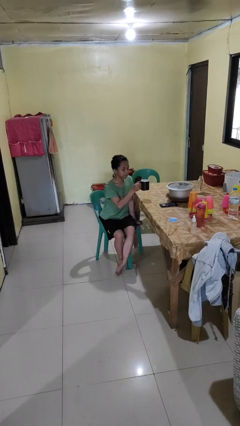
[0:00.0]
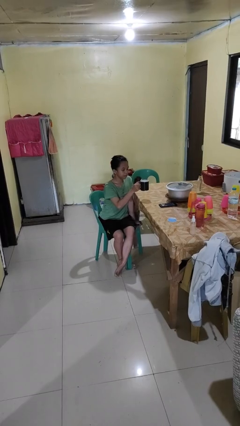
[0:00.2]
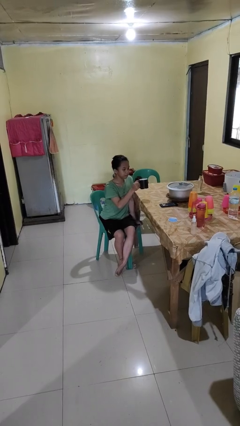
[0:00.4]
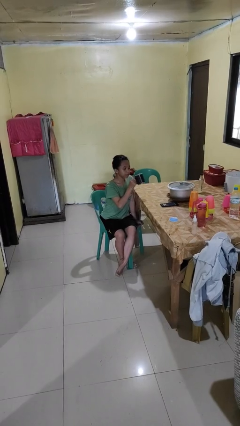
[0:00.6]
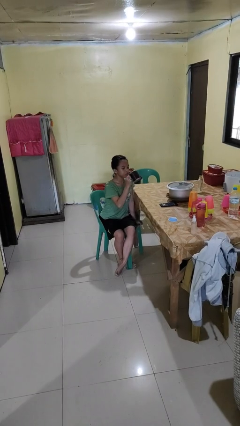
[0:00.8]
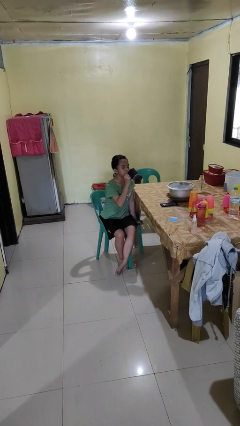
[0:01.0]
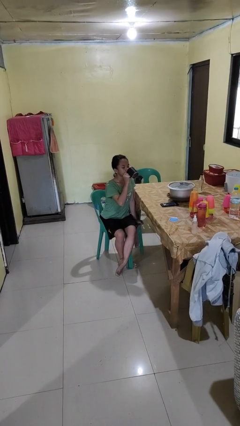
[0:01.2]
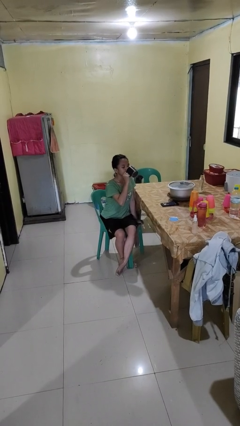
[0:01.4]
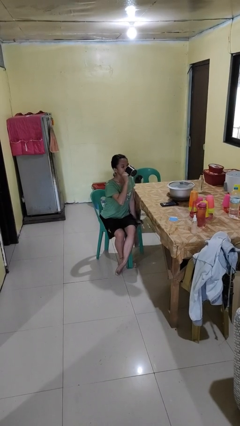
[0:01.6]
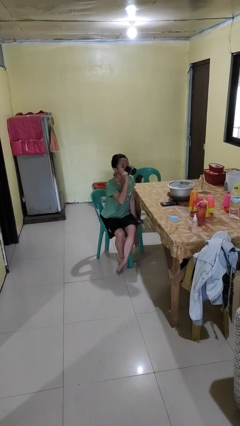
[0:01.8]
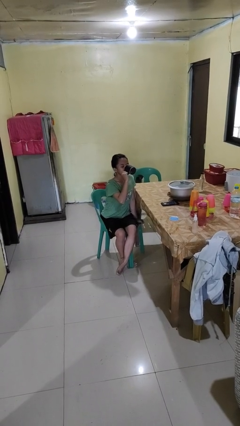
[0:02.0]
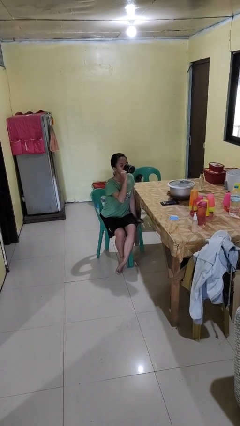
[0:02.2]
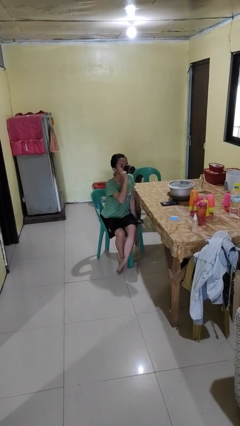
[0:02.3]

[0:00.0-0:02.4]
person drinks from mug

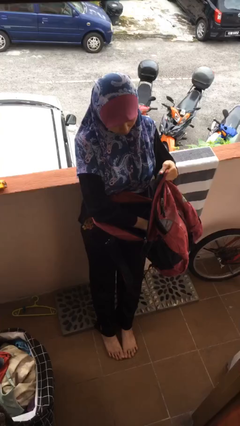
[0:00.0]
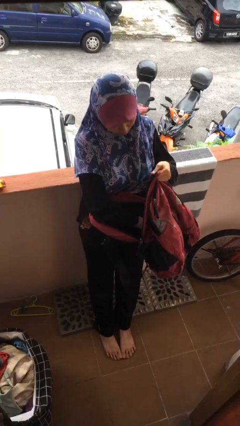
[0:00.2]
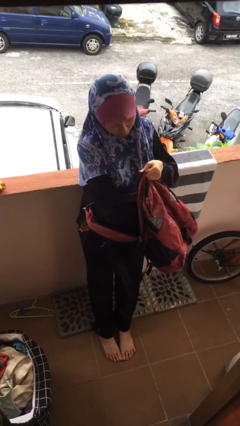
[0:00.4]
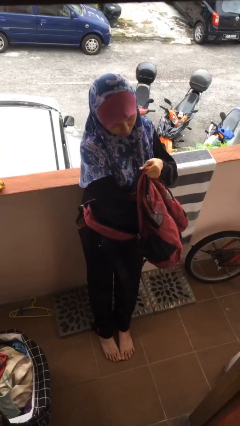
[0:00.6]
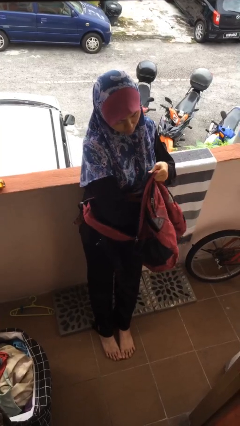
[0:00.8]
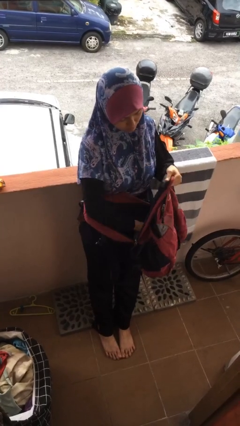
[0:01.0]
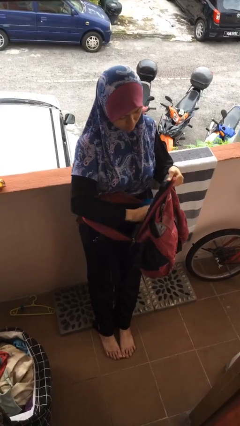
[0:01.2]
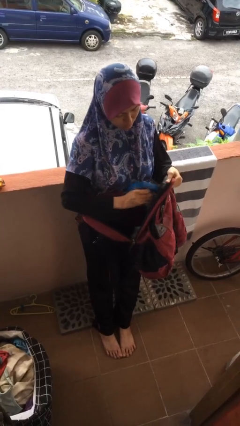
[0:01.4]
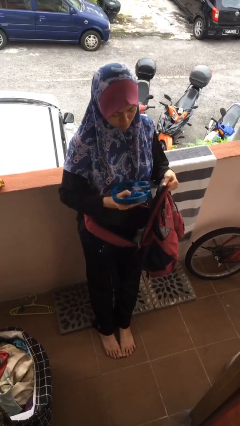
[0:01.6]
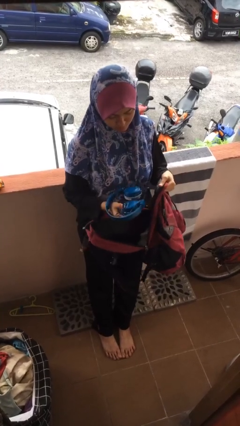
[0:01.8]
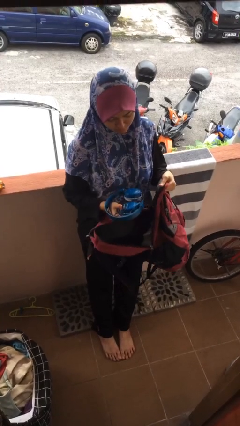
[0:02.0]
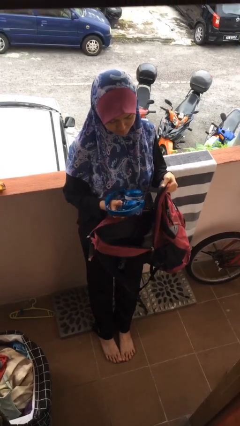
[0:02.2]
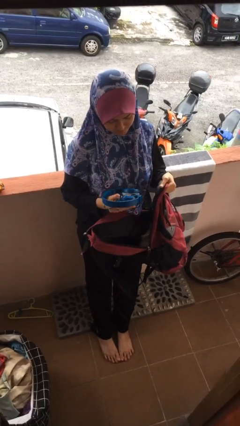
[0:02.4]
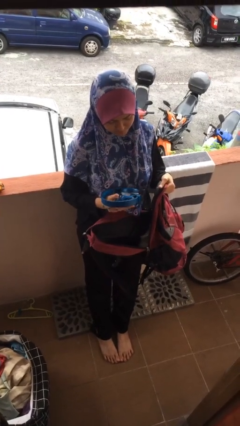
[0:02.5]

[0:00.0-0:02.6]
person takes object from backpack

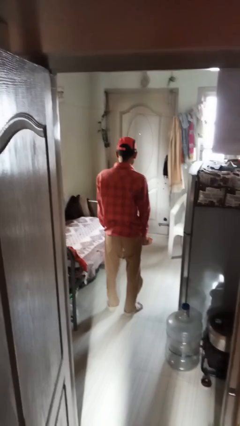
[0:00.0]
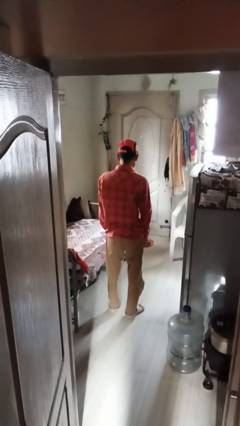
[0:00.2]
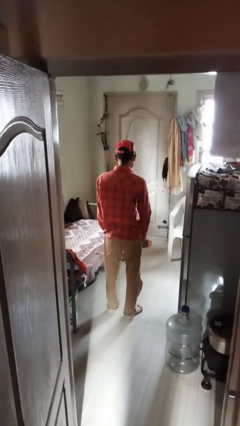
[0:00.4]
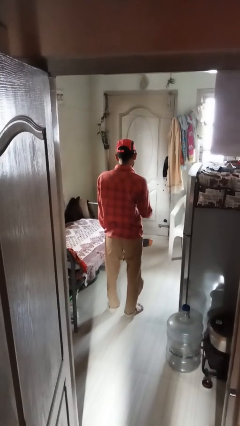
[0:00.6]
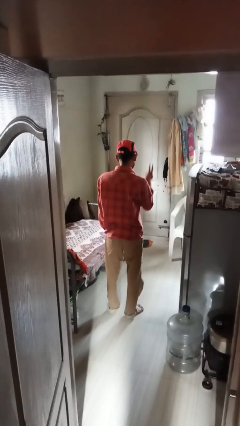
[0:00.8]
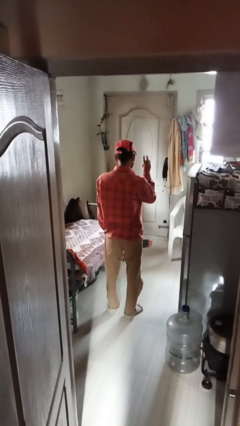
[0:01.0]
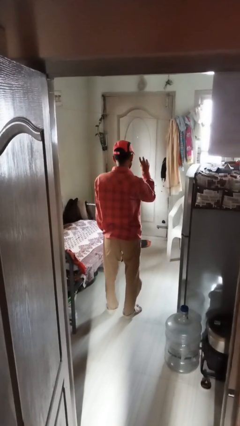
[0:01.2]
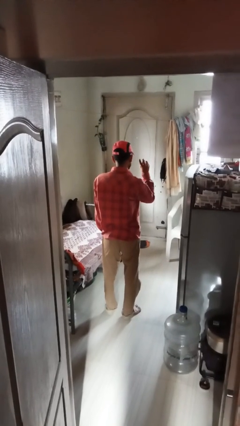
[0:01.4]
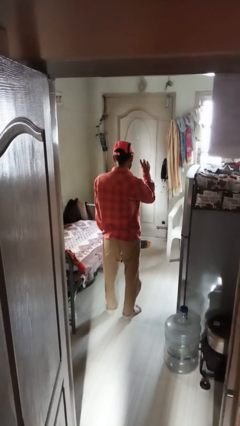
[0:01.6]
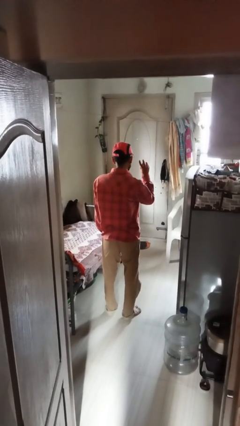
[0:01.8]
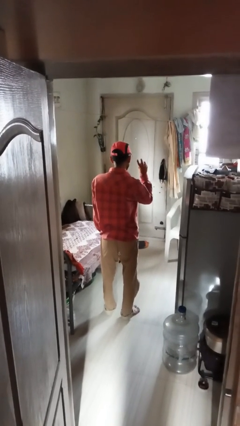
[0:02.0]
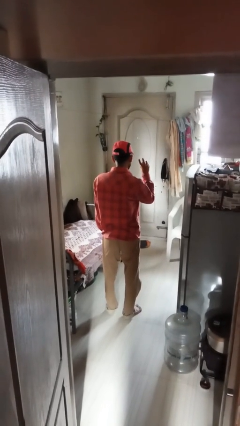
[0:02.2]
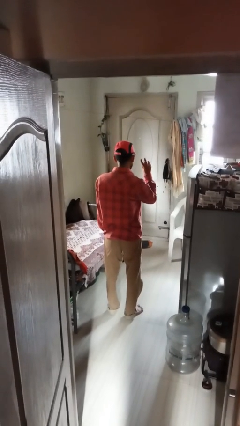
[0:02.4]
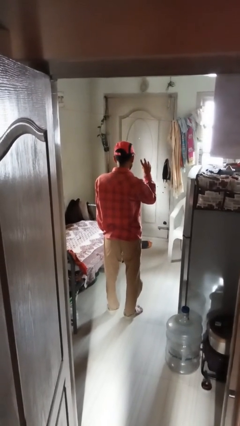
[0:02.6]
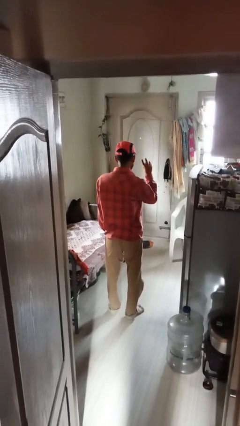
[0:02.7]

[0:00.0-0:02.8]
person gestures peace

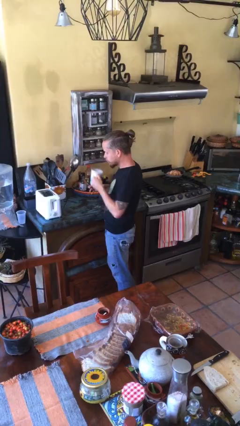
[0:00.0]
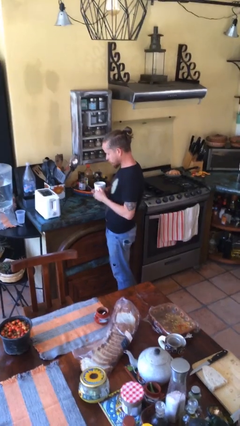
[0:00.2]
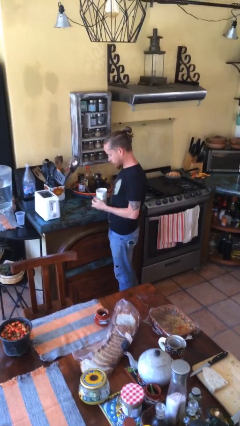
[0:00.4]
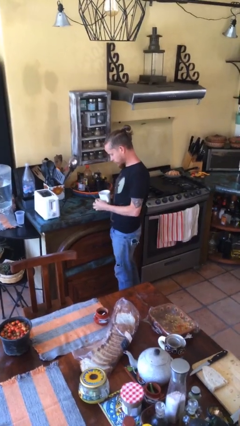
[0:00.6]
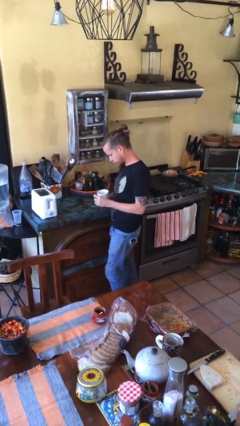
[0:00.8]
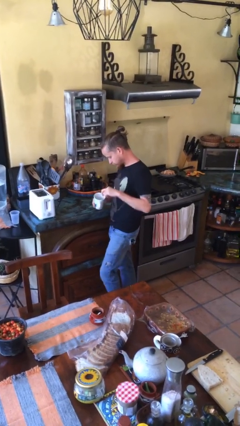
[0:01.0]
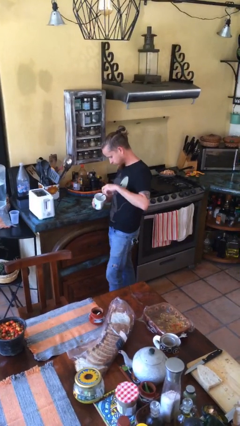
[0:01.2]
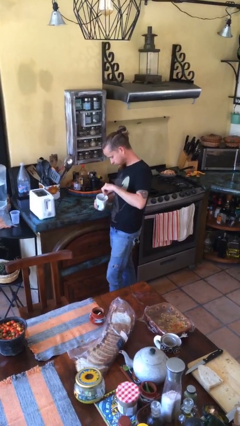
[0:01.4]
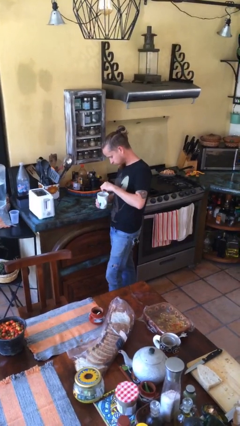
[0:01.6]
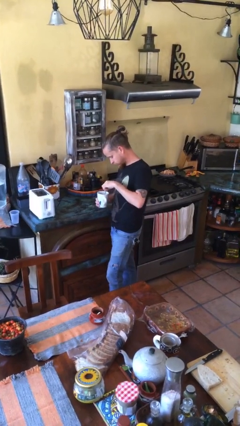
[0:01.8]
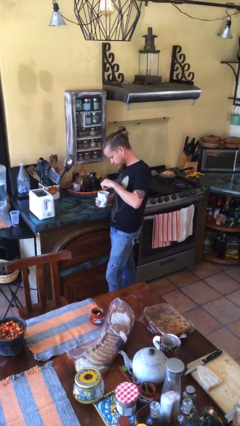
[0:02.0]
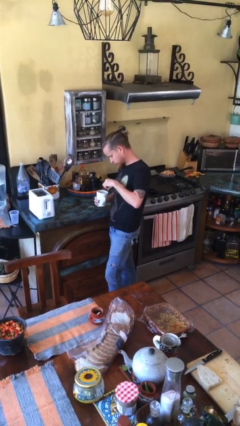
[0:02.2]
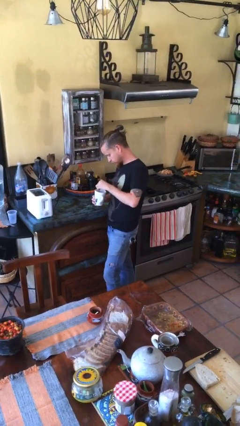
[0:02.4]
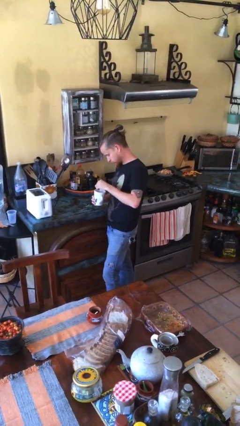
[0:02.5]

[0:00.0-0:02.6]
person stirs mug

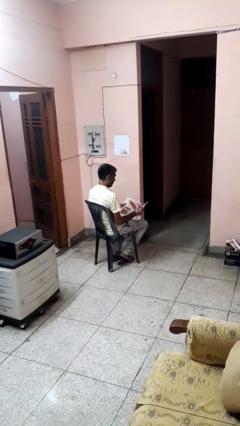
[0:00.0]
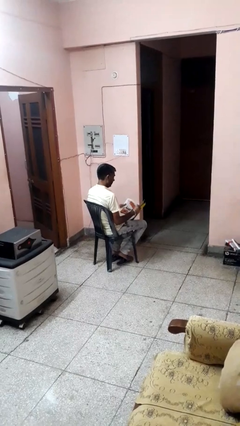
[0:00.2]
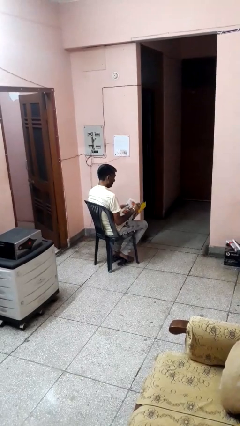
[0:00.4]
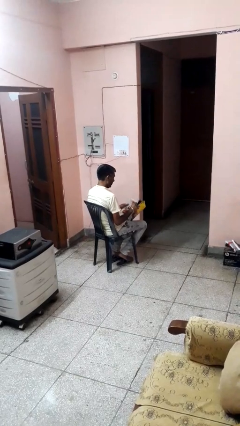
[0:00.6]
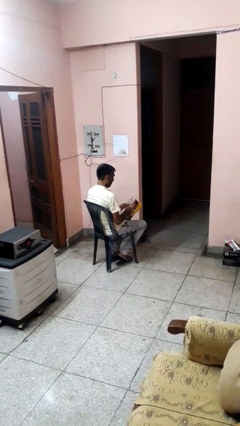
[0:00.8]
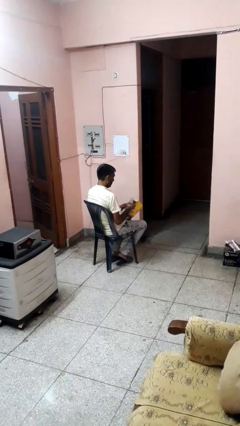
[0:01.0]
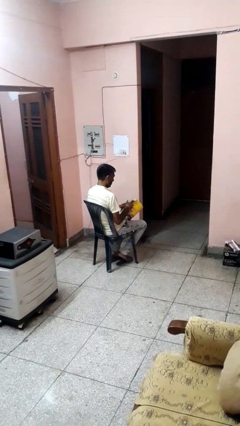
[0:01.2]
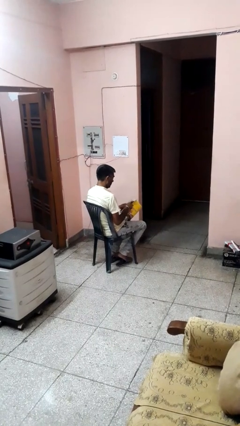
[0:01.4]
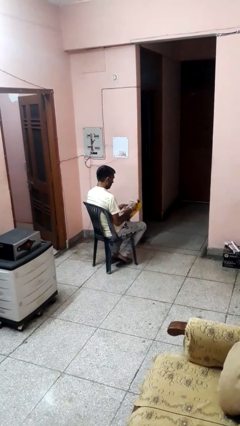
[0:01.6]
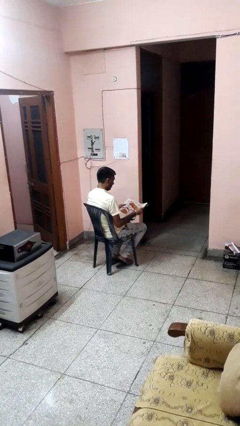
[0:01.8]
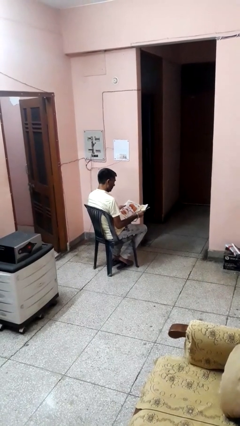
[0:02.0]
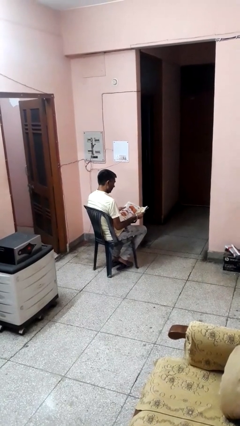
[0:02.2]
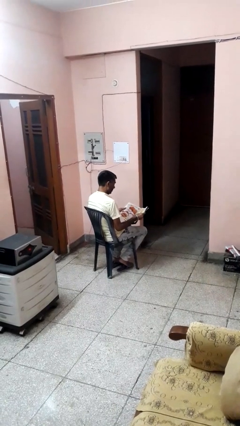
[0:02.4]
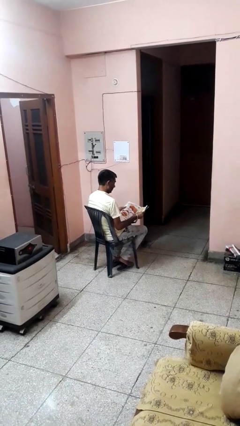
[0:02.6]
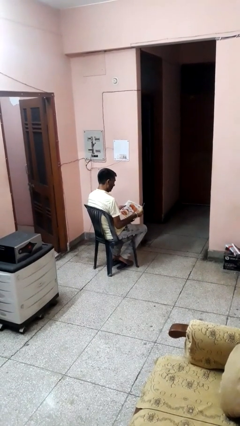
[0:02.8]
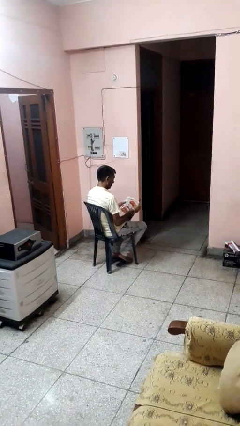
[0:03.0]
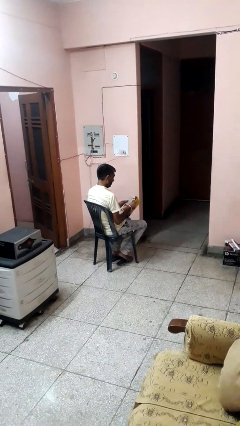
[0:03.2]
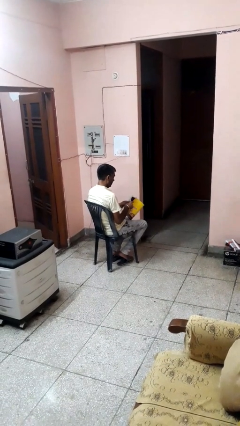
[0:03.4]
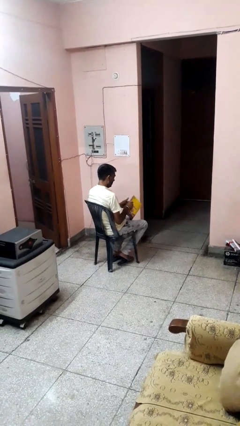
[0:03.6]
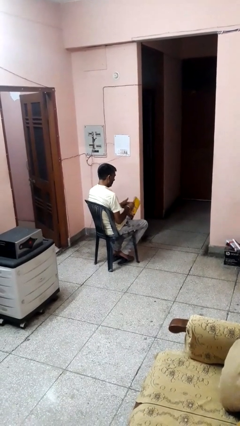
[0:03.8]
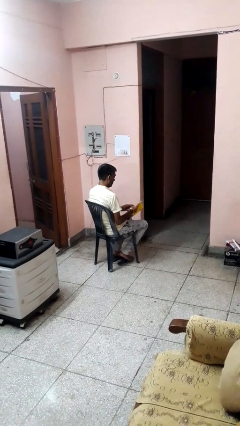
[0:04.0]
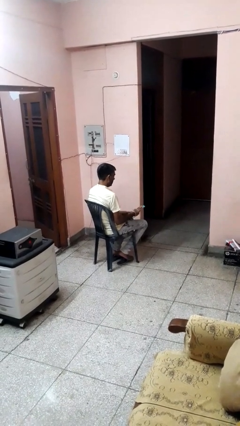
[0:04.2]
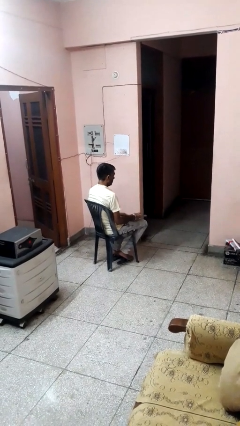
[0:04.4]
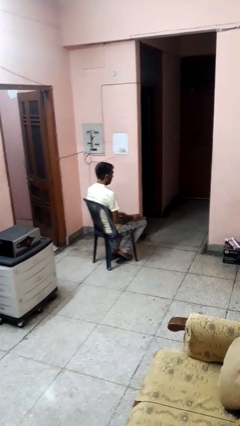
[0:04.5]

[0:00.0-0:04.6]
person reads magazine

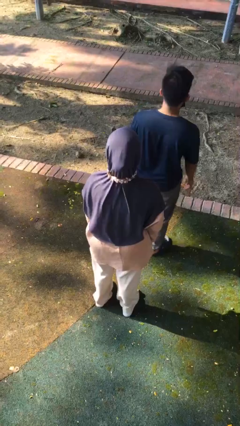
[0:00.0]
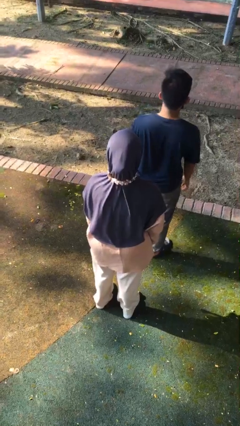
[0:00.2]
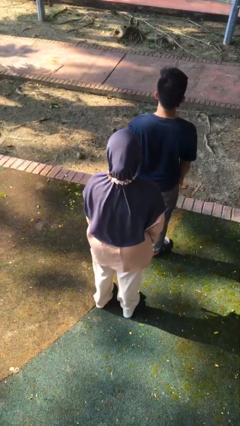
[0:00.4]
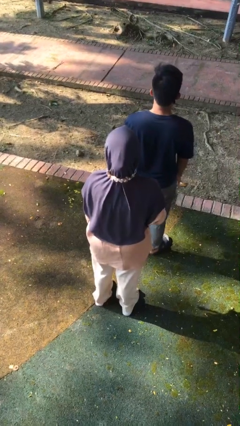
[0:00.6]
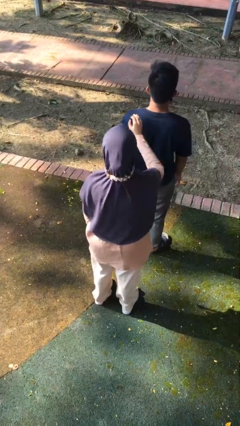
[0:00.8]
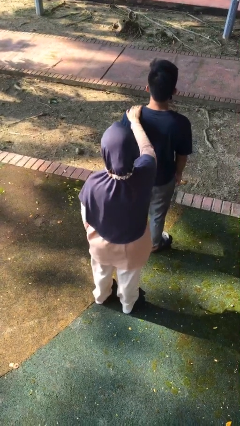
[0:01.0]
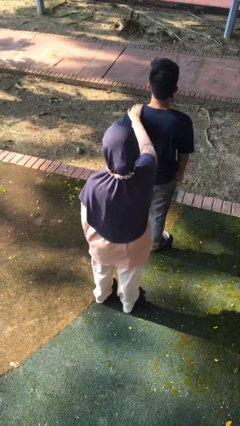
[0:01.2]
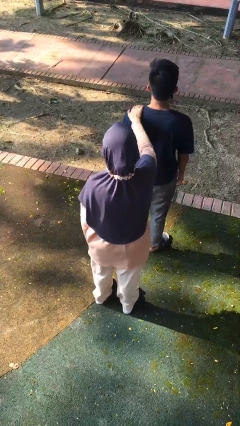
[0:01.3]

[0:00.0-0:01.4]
person grabs person by shoulder

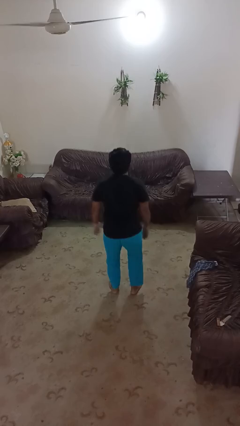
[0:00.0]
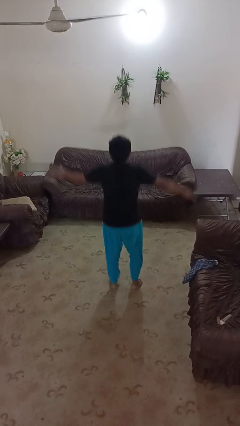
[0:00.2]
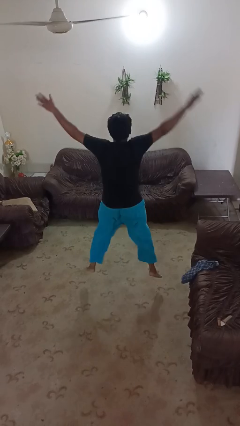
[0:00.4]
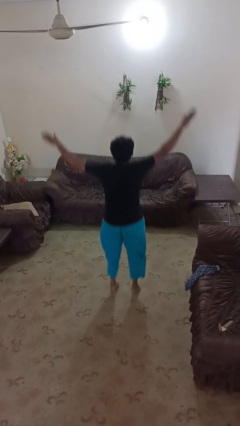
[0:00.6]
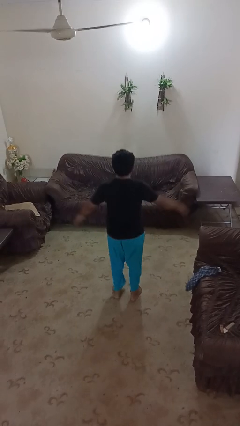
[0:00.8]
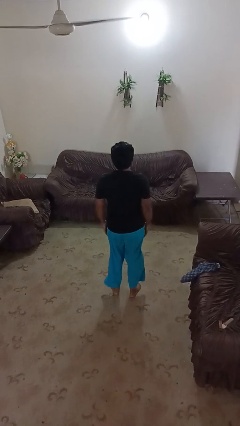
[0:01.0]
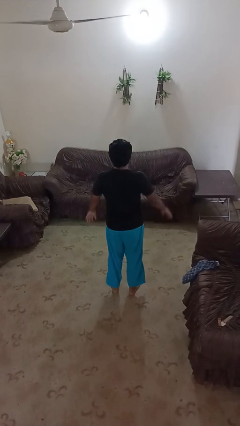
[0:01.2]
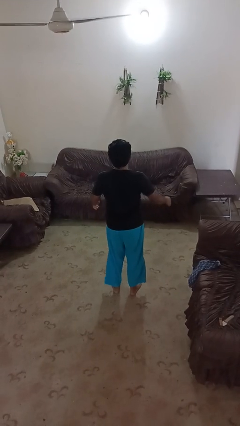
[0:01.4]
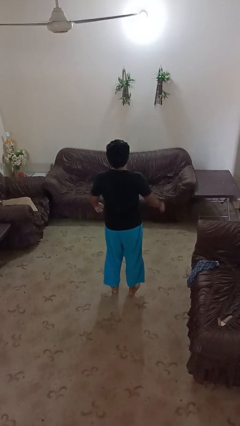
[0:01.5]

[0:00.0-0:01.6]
person exercises with jumping jacks
